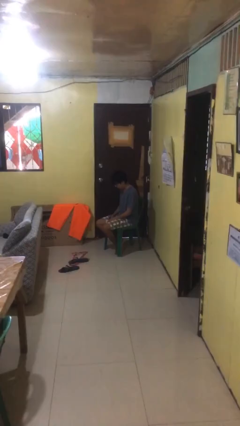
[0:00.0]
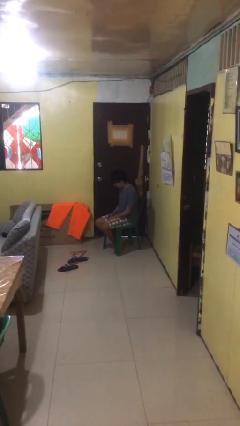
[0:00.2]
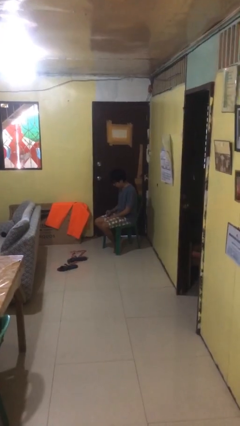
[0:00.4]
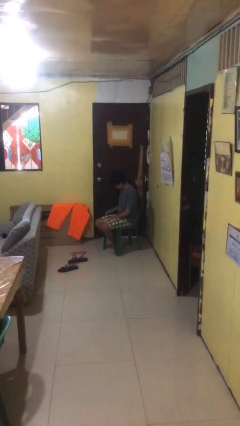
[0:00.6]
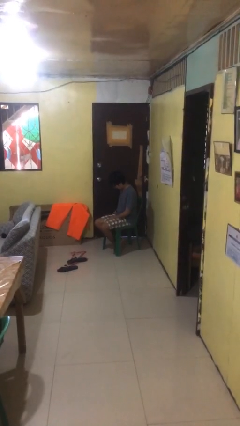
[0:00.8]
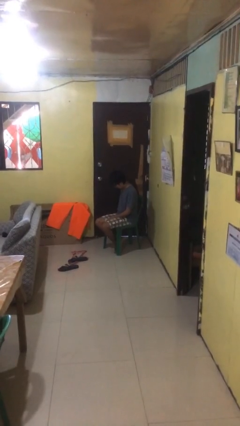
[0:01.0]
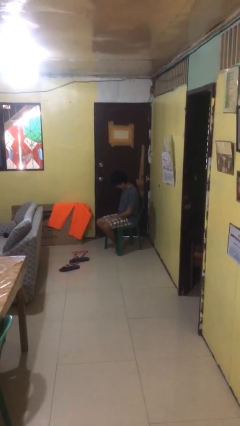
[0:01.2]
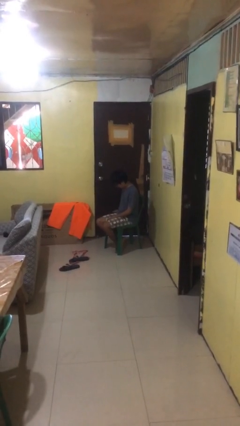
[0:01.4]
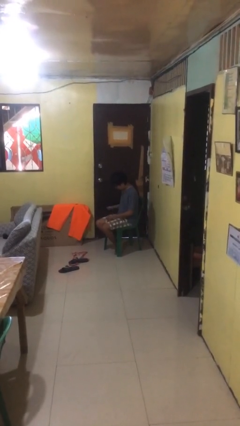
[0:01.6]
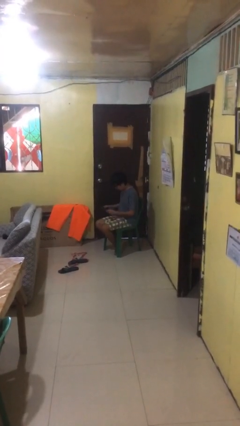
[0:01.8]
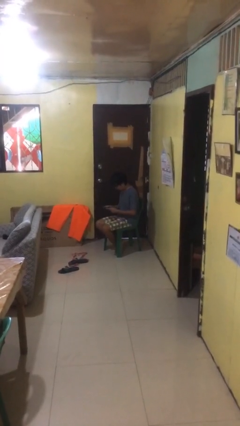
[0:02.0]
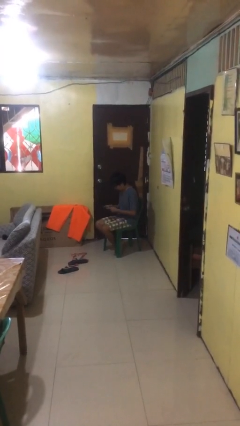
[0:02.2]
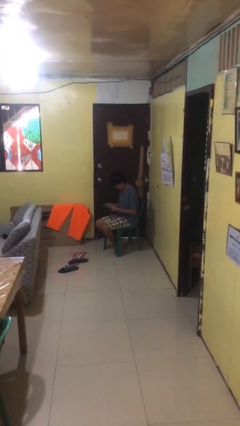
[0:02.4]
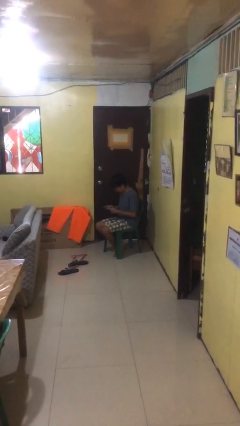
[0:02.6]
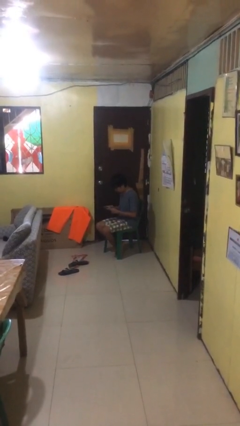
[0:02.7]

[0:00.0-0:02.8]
person takes phone from pocket
